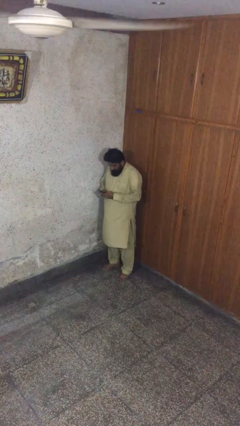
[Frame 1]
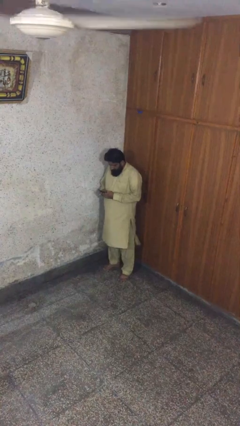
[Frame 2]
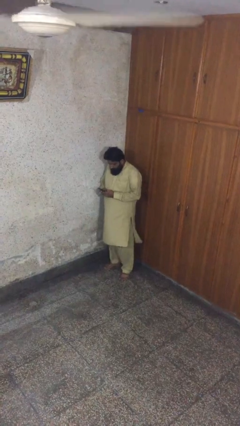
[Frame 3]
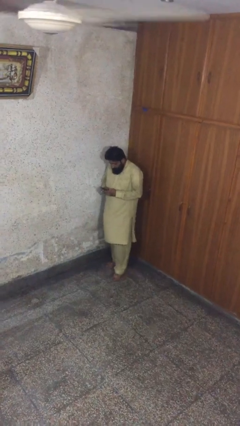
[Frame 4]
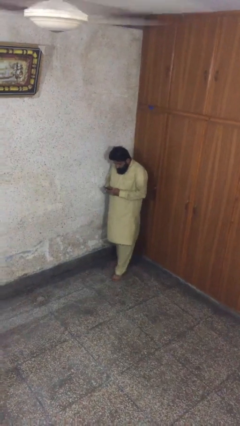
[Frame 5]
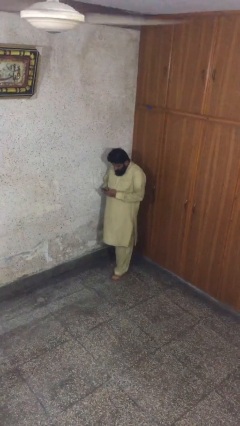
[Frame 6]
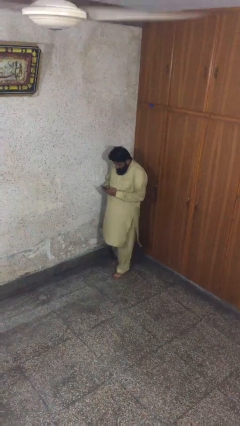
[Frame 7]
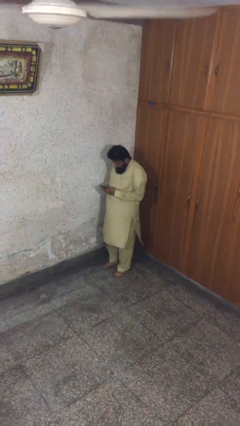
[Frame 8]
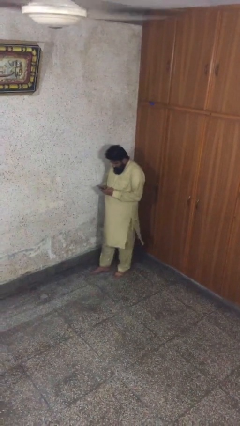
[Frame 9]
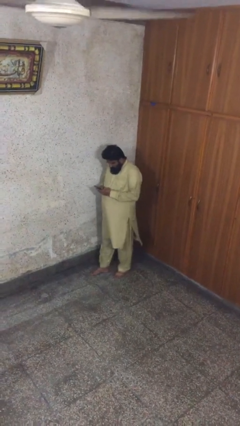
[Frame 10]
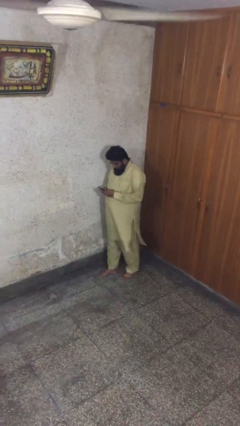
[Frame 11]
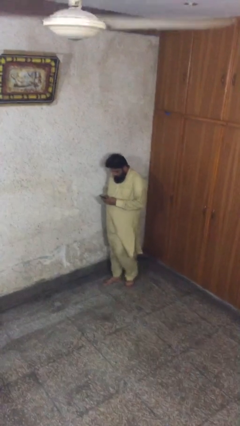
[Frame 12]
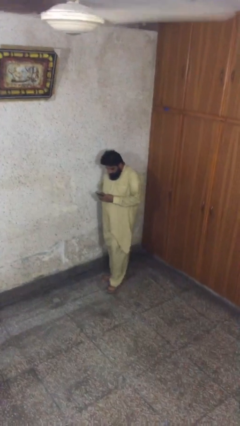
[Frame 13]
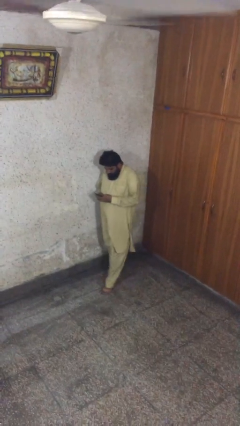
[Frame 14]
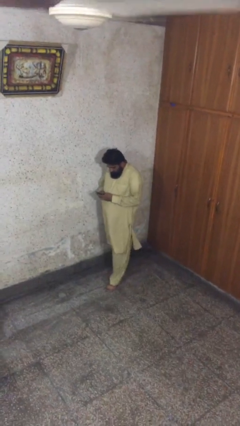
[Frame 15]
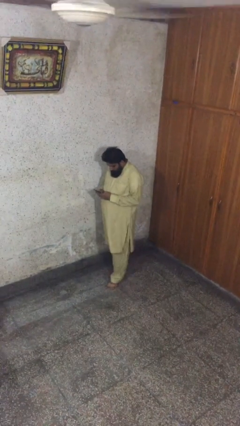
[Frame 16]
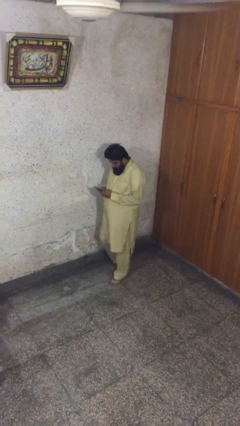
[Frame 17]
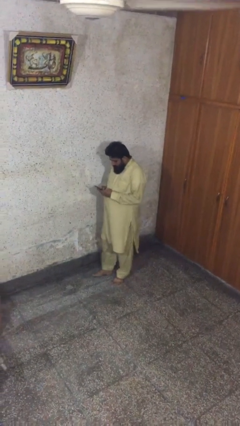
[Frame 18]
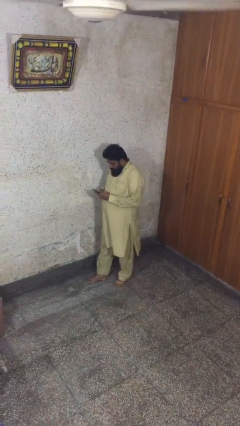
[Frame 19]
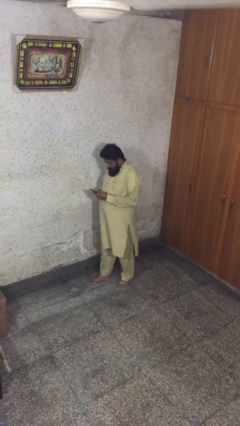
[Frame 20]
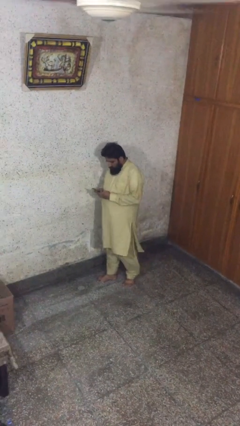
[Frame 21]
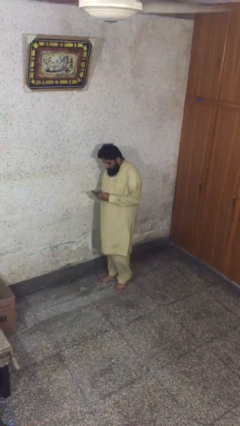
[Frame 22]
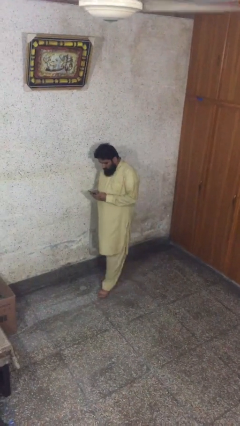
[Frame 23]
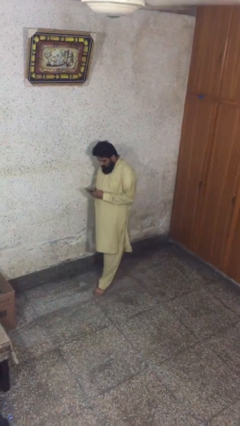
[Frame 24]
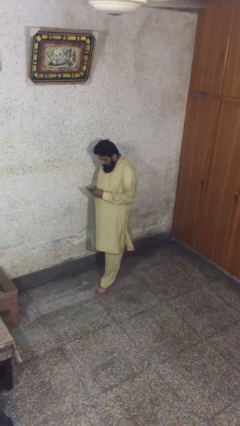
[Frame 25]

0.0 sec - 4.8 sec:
person texts on phone

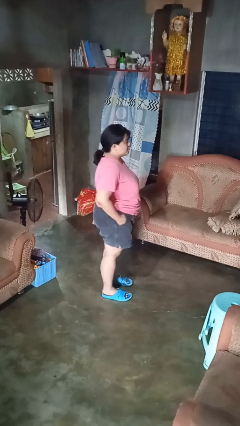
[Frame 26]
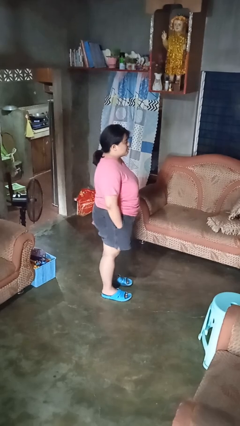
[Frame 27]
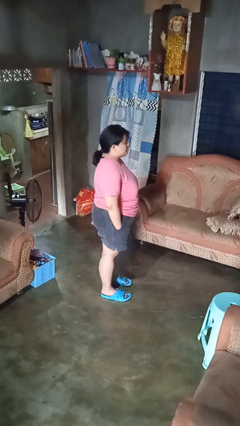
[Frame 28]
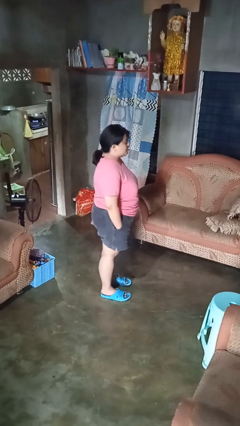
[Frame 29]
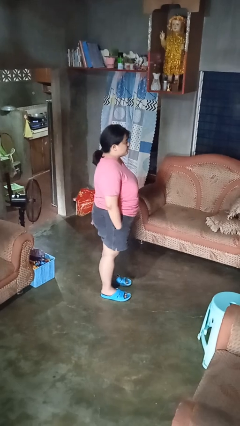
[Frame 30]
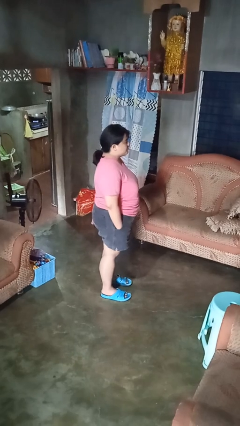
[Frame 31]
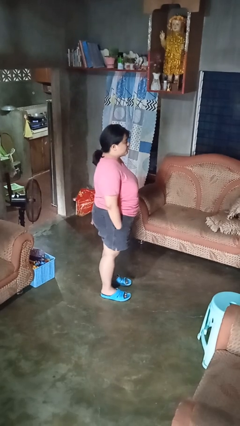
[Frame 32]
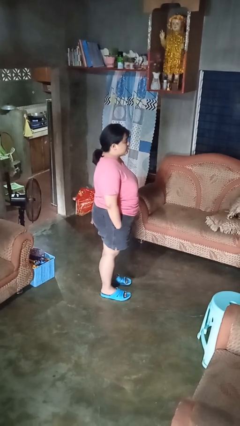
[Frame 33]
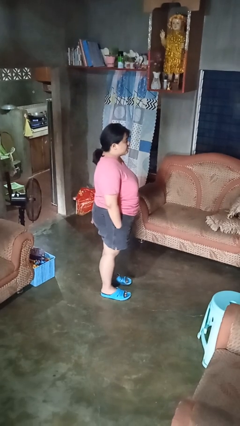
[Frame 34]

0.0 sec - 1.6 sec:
person puts hands in back pockets

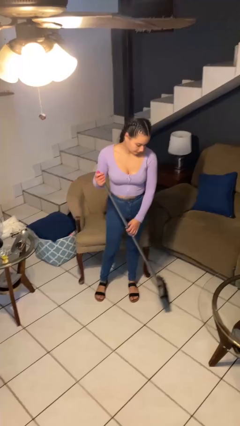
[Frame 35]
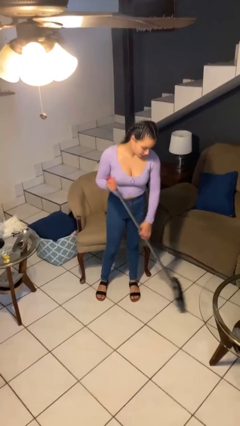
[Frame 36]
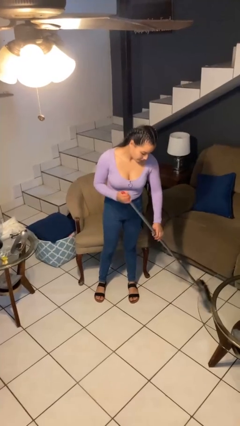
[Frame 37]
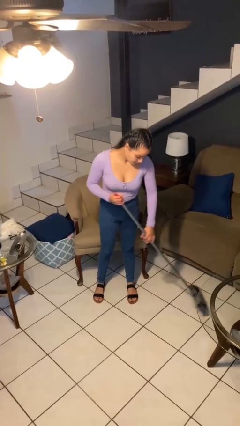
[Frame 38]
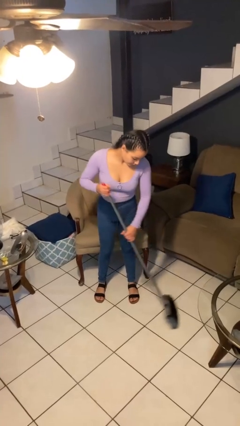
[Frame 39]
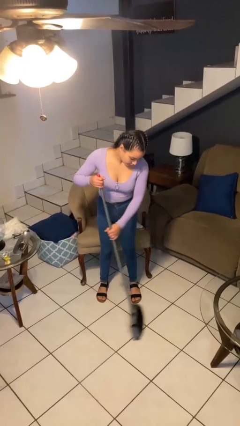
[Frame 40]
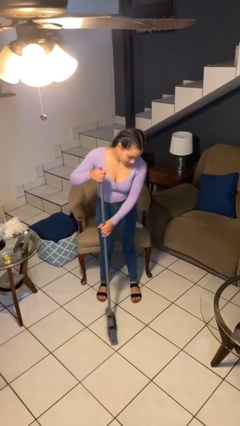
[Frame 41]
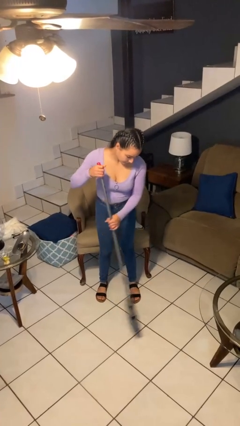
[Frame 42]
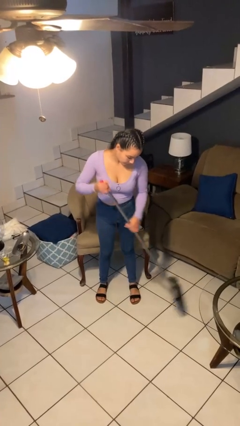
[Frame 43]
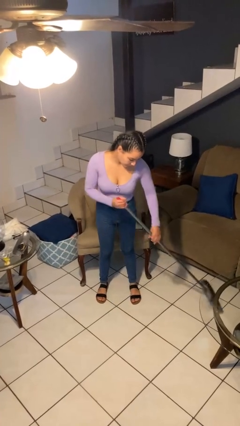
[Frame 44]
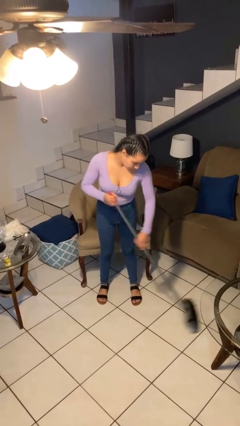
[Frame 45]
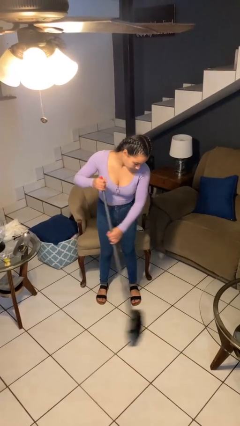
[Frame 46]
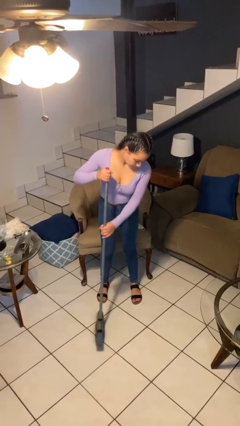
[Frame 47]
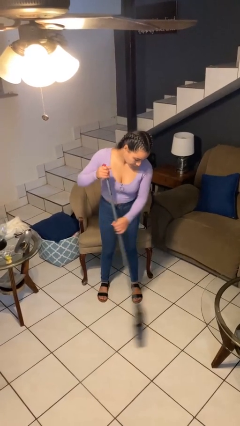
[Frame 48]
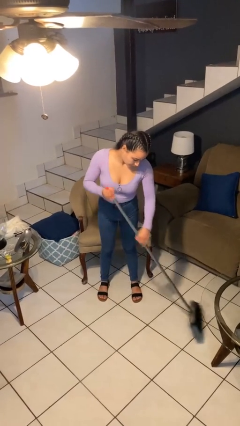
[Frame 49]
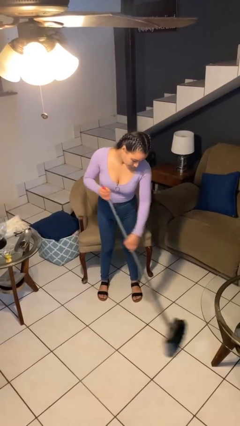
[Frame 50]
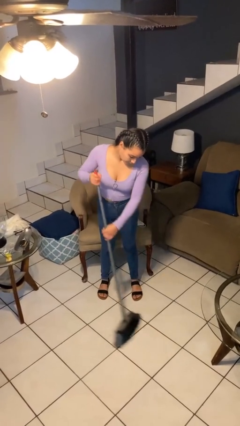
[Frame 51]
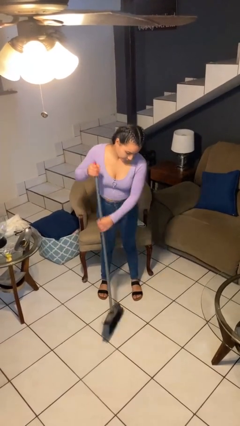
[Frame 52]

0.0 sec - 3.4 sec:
person sweeps floor

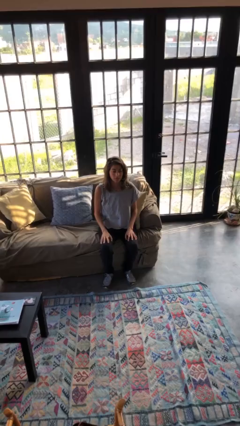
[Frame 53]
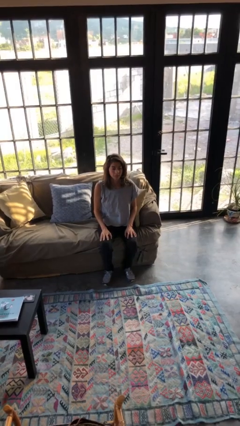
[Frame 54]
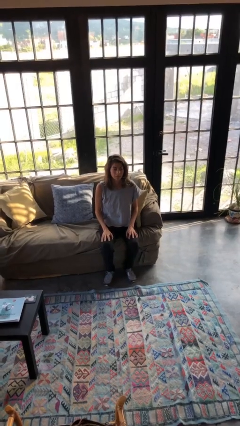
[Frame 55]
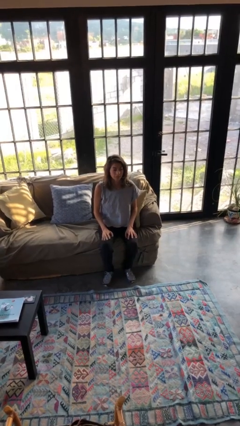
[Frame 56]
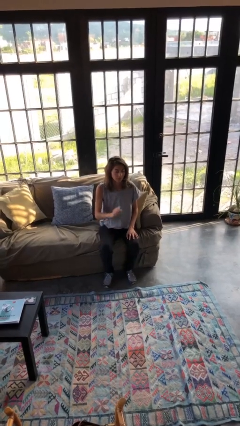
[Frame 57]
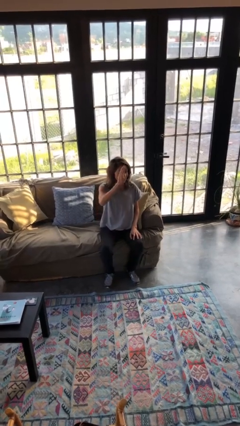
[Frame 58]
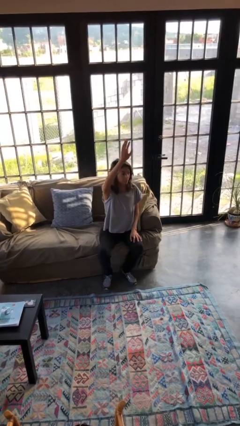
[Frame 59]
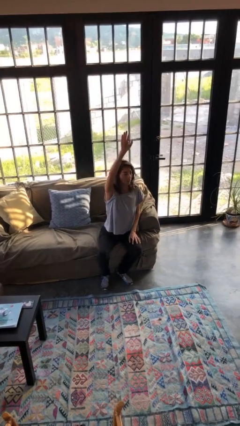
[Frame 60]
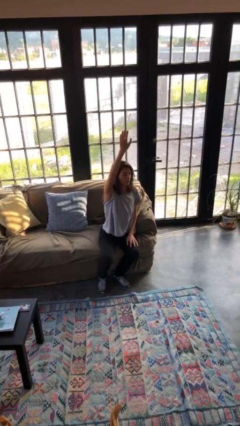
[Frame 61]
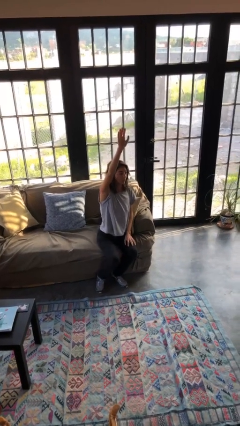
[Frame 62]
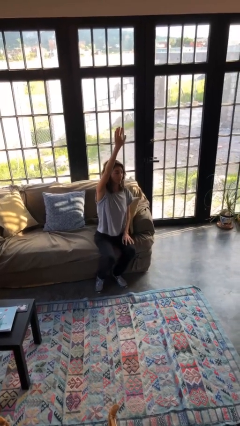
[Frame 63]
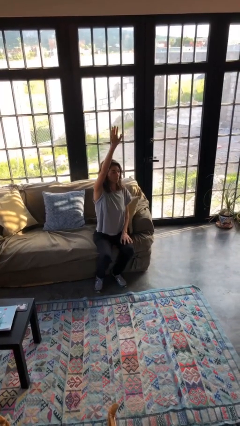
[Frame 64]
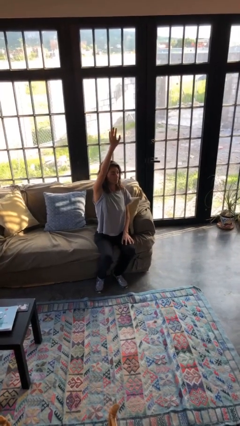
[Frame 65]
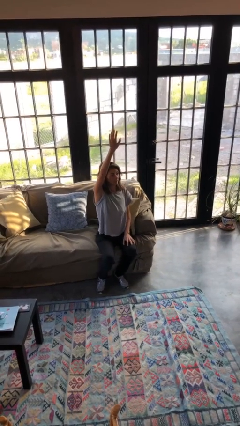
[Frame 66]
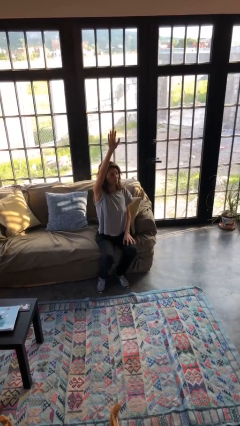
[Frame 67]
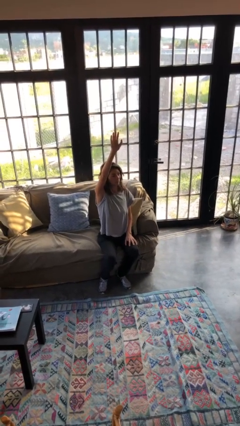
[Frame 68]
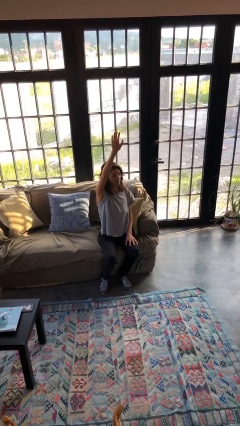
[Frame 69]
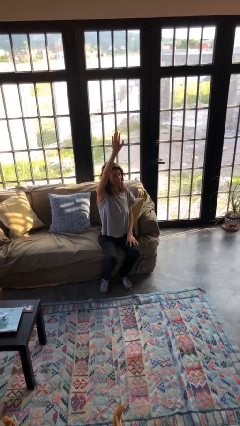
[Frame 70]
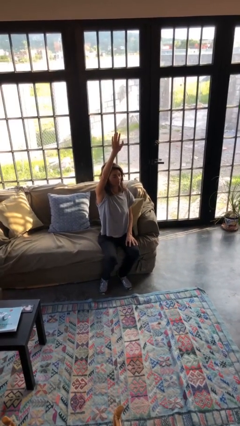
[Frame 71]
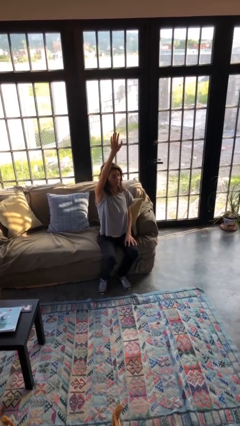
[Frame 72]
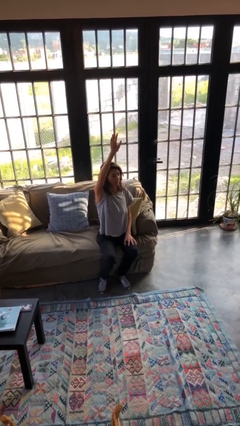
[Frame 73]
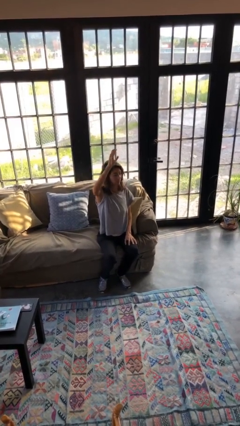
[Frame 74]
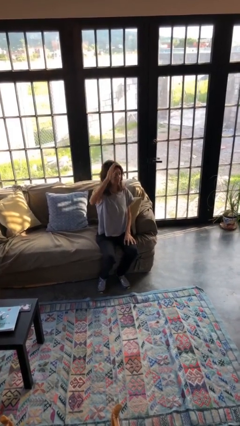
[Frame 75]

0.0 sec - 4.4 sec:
person gestures raise hand

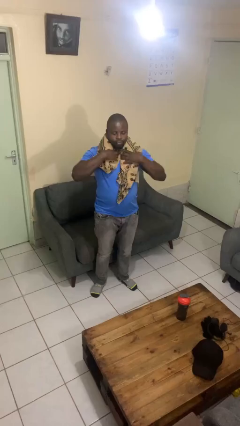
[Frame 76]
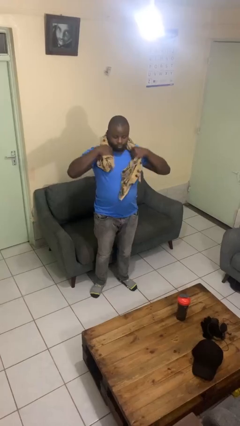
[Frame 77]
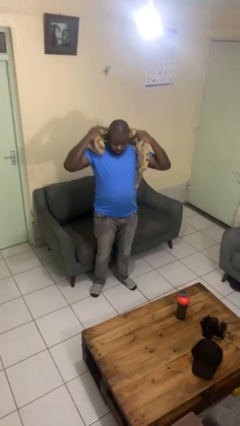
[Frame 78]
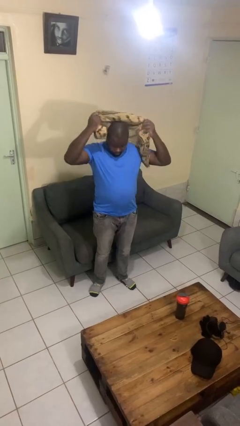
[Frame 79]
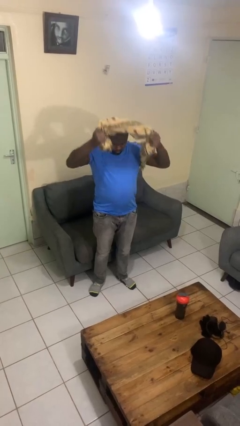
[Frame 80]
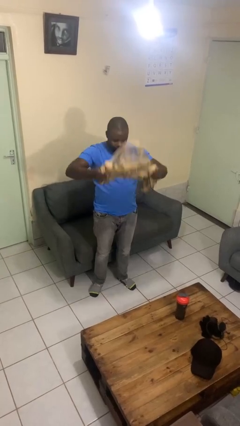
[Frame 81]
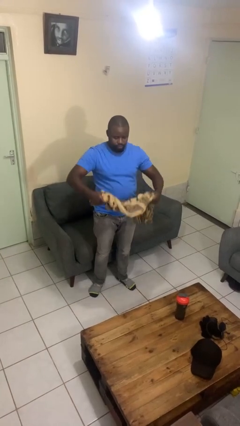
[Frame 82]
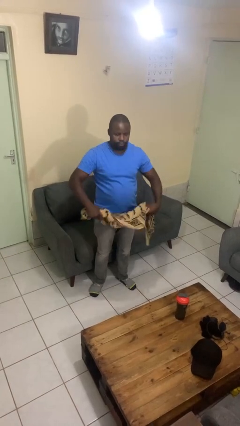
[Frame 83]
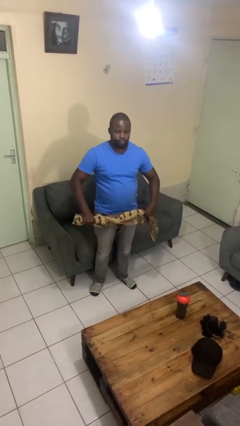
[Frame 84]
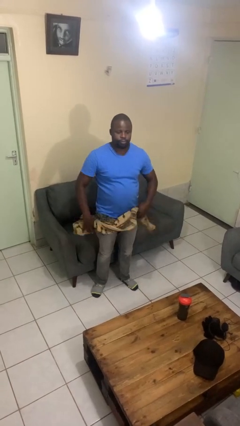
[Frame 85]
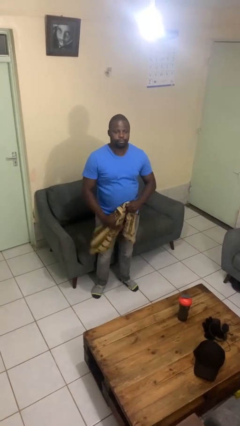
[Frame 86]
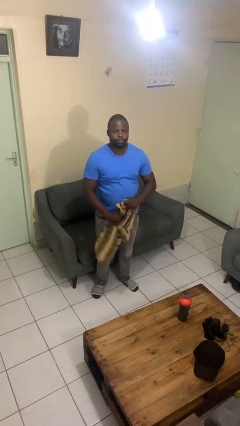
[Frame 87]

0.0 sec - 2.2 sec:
person takes off scarf

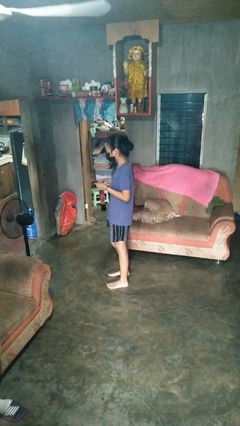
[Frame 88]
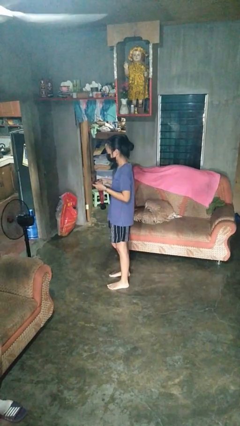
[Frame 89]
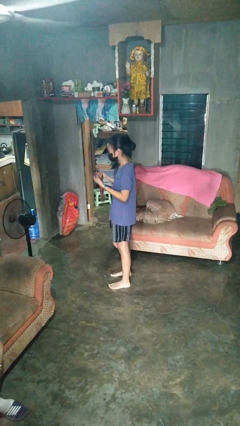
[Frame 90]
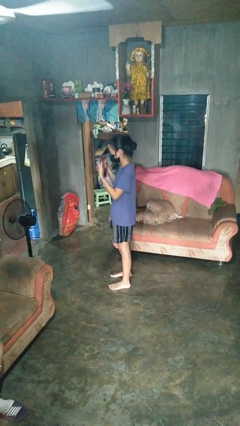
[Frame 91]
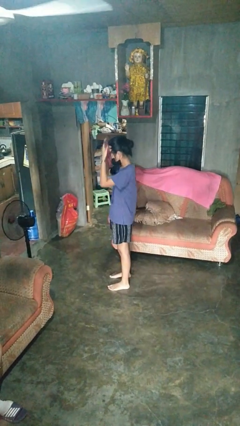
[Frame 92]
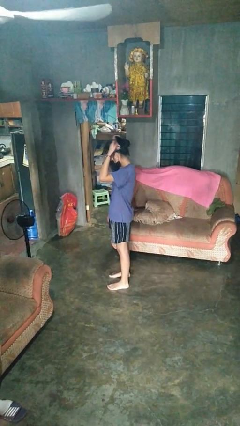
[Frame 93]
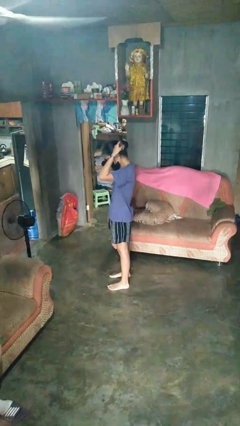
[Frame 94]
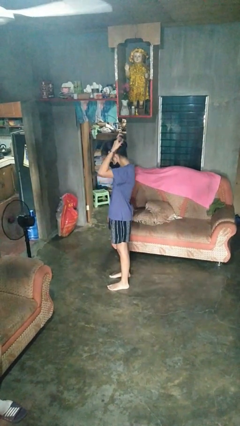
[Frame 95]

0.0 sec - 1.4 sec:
person puts on necklace
